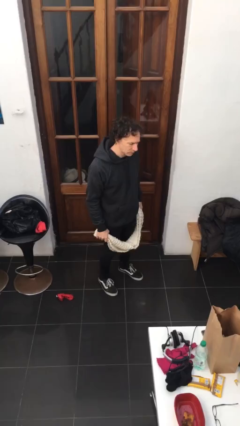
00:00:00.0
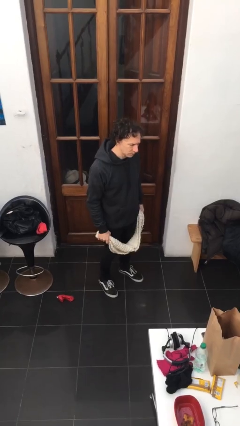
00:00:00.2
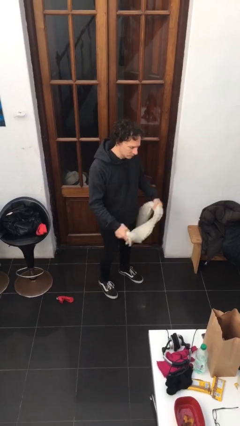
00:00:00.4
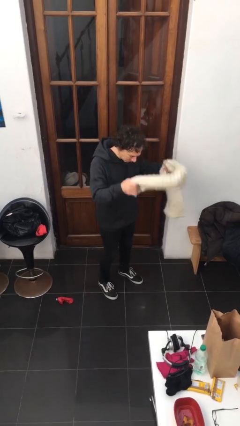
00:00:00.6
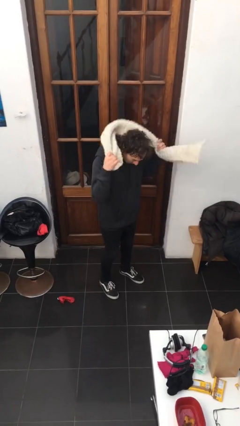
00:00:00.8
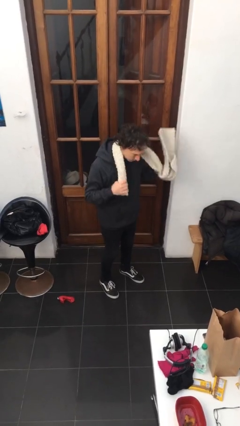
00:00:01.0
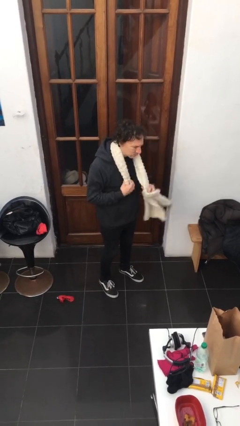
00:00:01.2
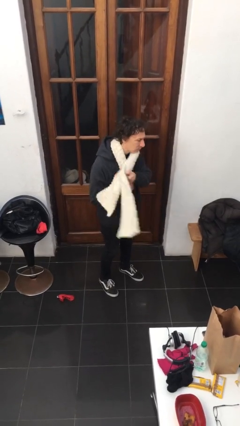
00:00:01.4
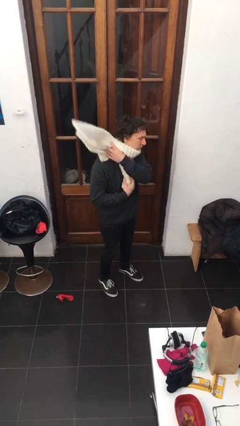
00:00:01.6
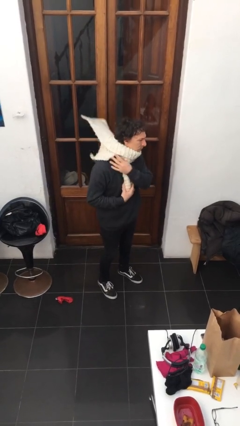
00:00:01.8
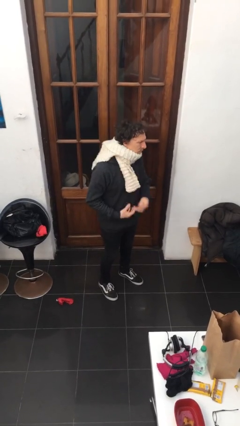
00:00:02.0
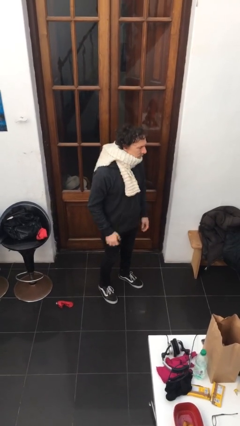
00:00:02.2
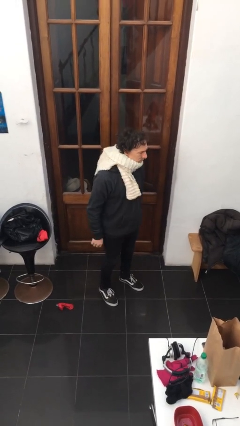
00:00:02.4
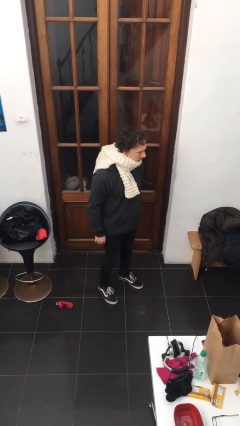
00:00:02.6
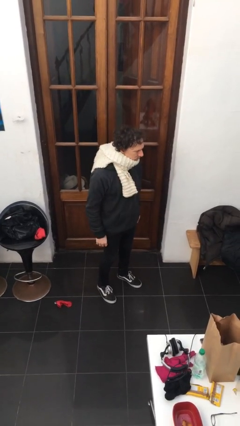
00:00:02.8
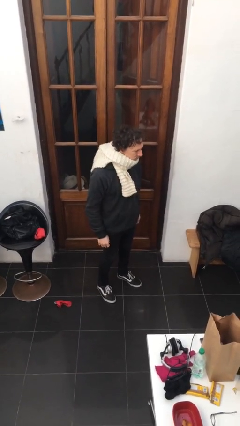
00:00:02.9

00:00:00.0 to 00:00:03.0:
person puts on scarf

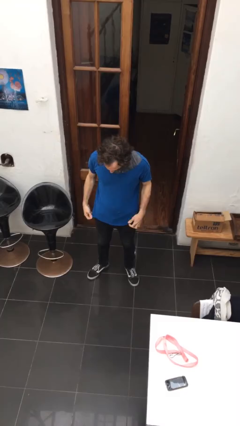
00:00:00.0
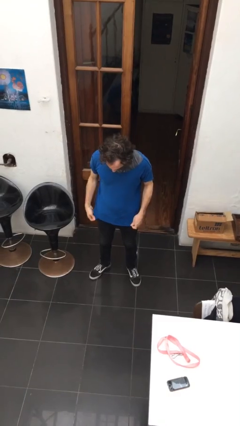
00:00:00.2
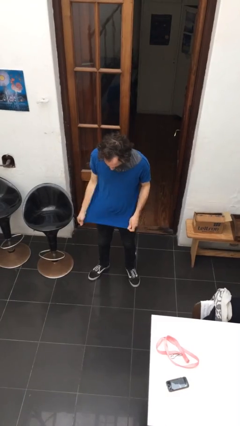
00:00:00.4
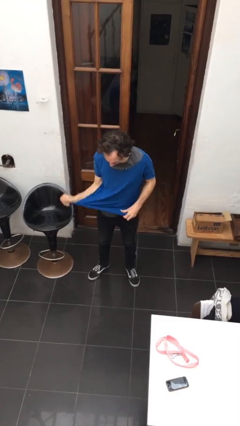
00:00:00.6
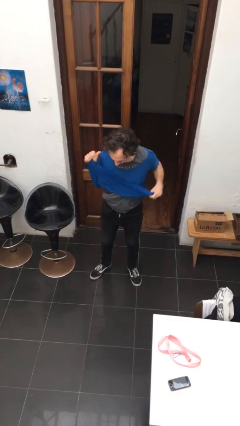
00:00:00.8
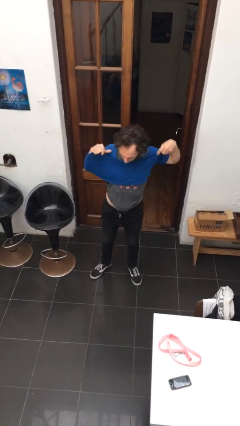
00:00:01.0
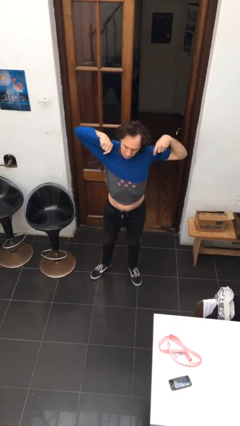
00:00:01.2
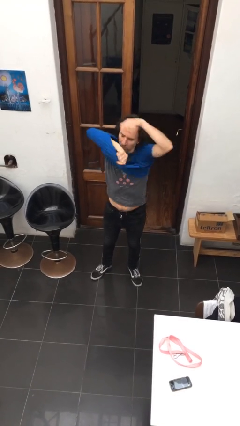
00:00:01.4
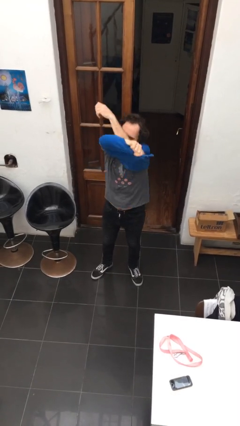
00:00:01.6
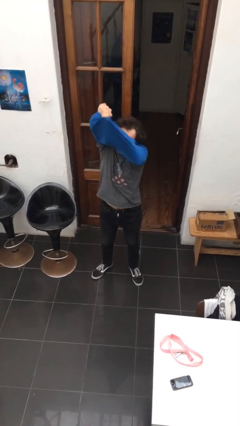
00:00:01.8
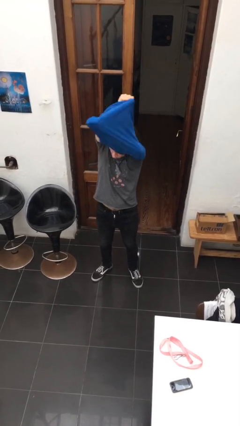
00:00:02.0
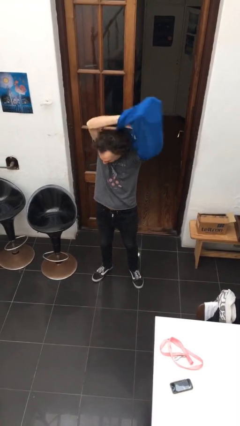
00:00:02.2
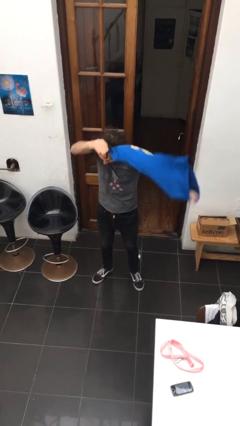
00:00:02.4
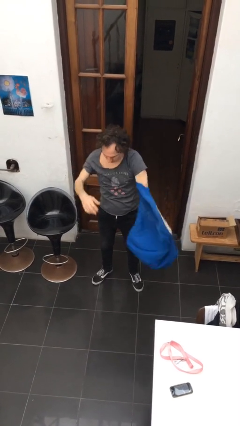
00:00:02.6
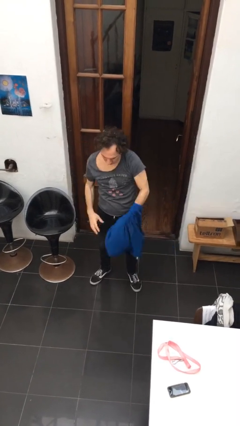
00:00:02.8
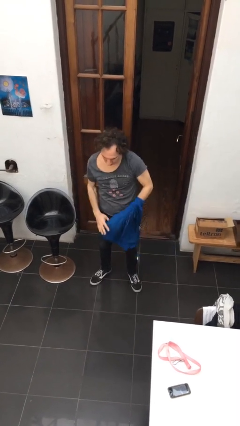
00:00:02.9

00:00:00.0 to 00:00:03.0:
person takes off shirt

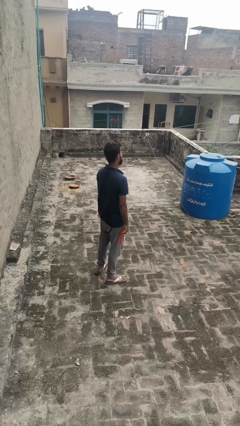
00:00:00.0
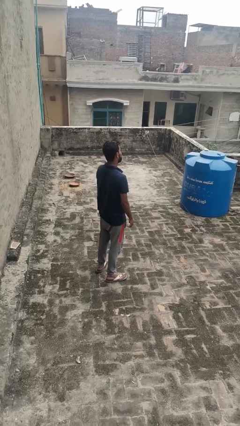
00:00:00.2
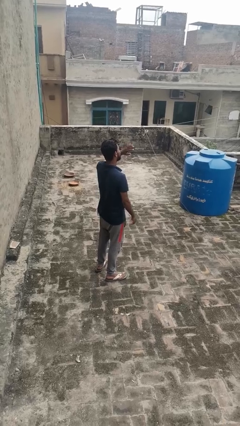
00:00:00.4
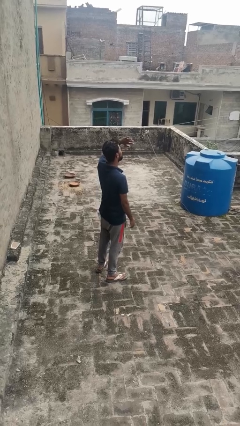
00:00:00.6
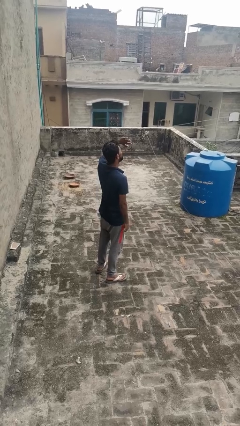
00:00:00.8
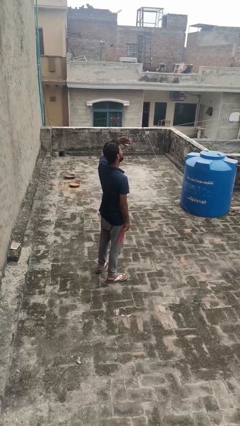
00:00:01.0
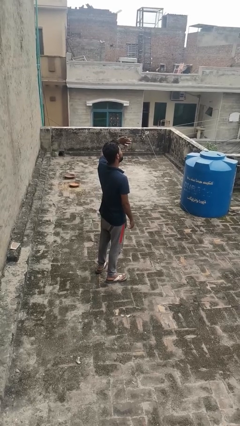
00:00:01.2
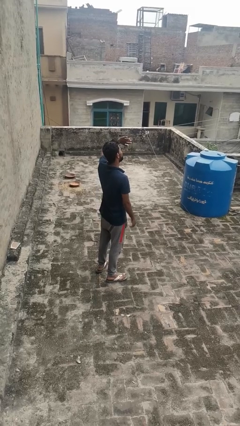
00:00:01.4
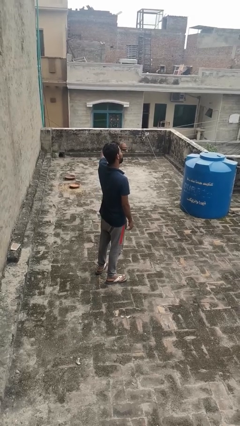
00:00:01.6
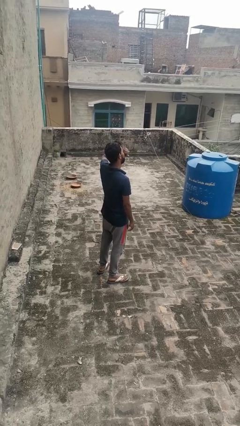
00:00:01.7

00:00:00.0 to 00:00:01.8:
person shades eyes

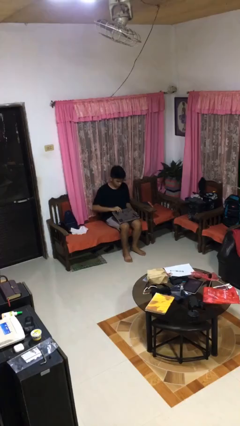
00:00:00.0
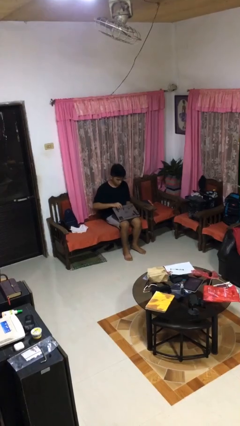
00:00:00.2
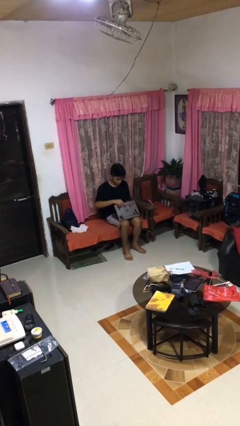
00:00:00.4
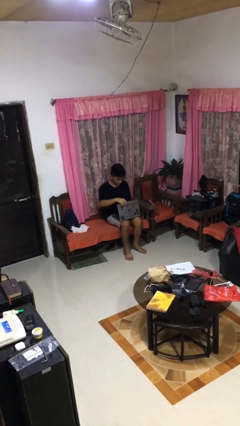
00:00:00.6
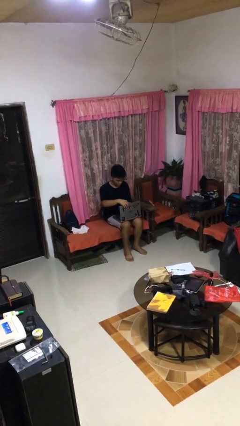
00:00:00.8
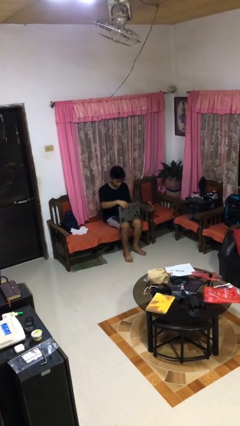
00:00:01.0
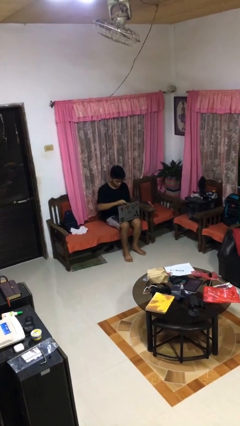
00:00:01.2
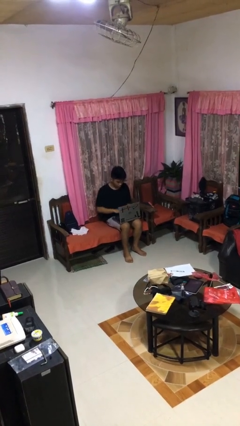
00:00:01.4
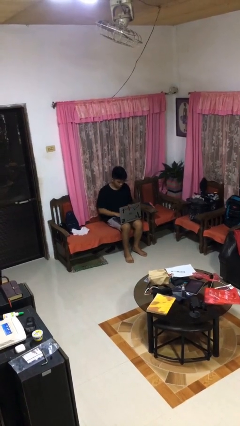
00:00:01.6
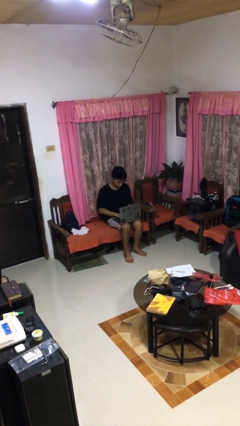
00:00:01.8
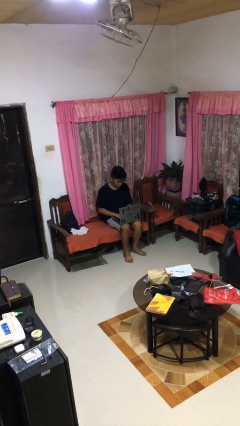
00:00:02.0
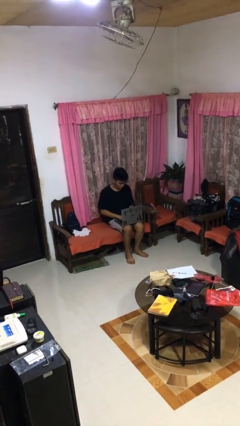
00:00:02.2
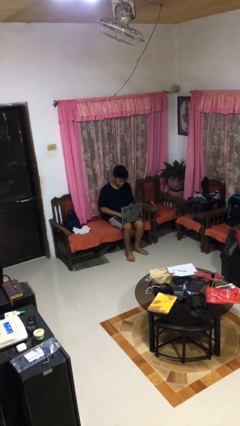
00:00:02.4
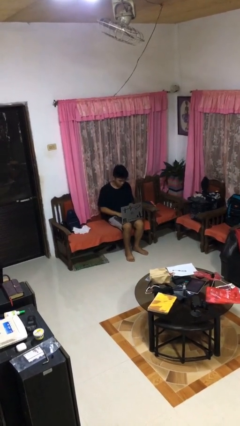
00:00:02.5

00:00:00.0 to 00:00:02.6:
person opens laptop

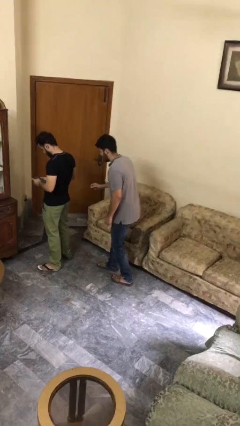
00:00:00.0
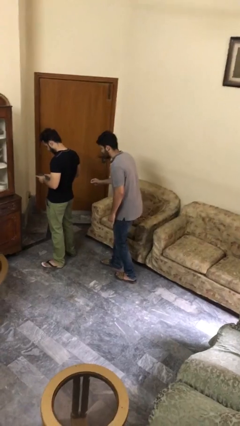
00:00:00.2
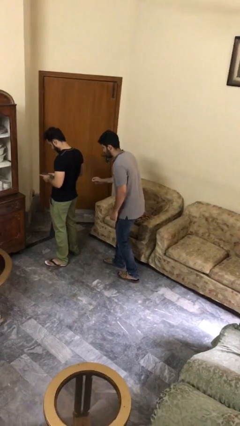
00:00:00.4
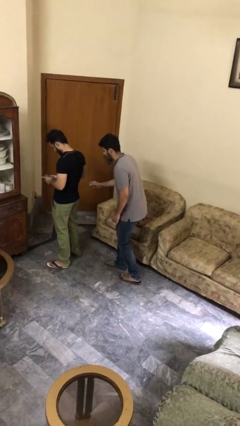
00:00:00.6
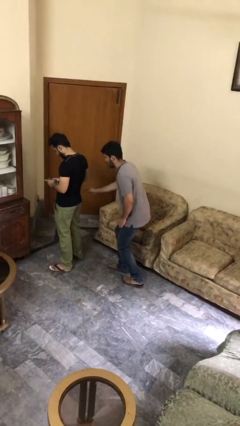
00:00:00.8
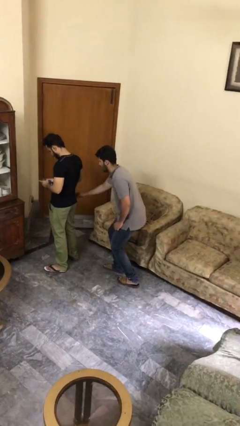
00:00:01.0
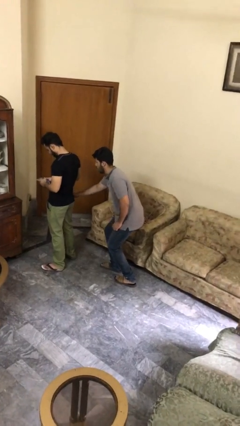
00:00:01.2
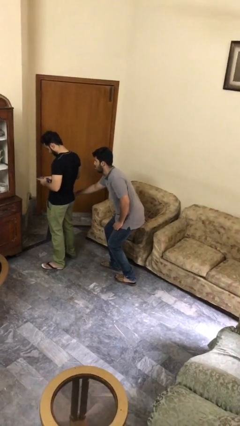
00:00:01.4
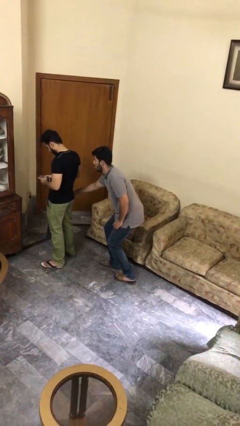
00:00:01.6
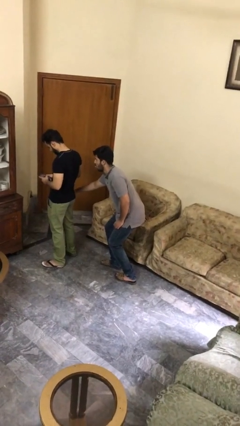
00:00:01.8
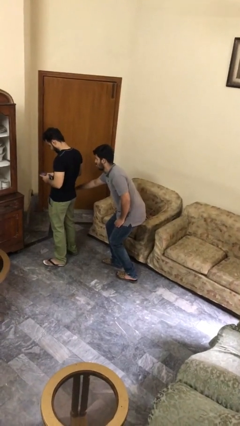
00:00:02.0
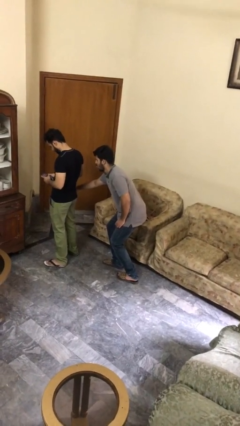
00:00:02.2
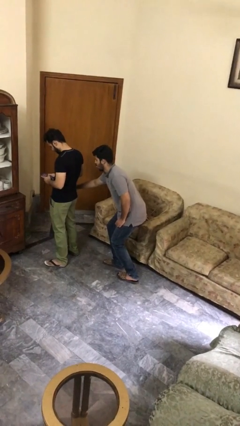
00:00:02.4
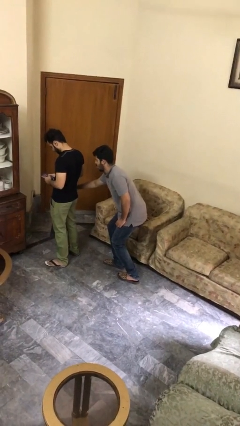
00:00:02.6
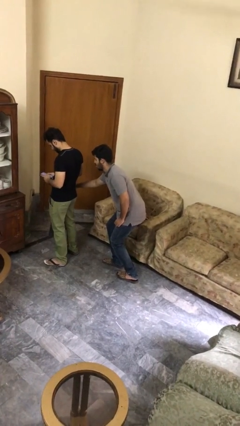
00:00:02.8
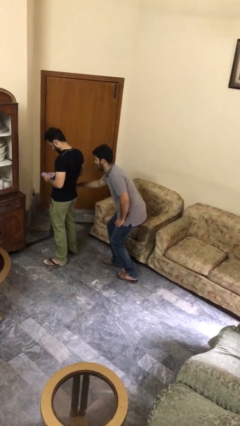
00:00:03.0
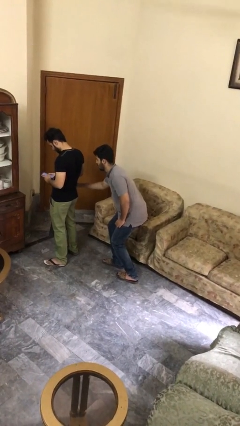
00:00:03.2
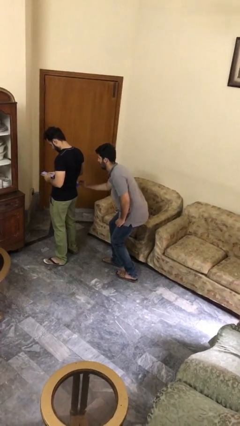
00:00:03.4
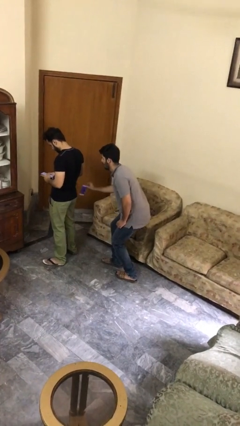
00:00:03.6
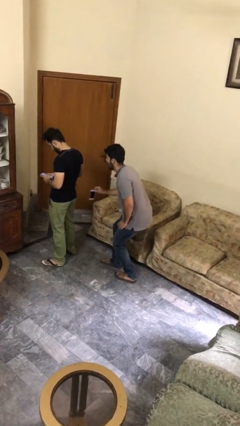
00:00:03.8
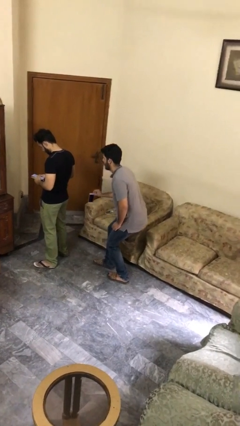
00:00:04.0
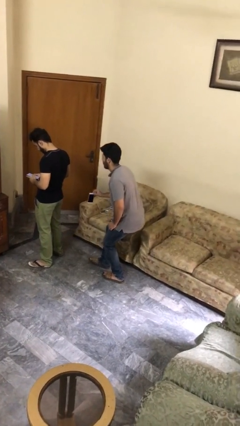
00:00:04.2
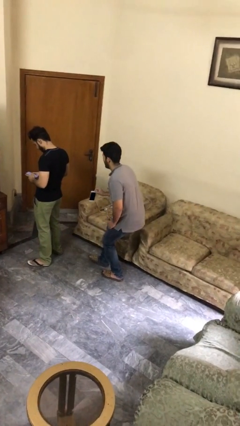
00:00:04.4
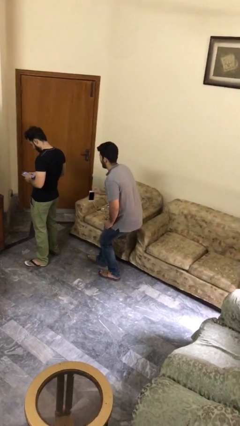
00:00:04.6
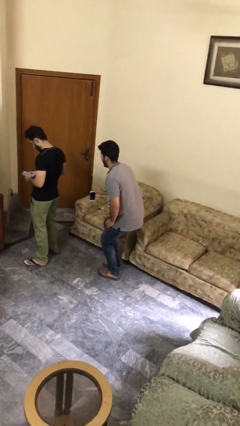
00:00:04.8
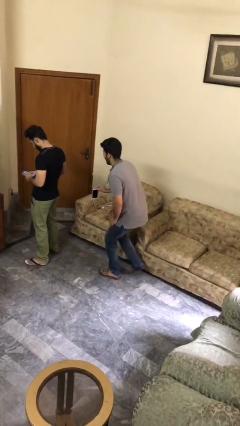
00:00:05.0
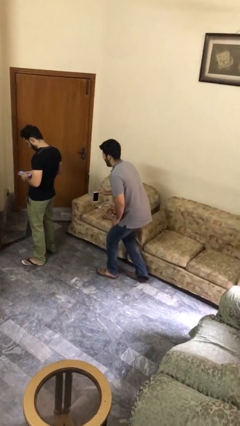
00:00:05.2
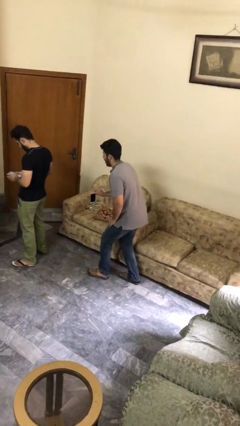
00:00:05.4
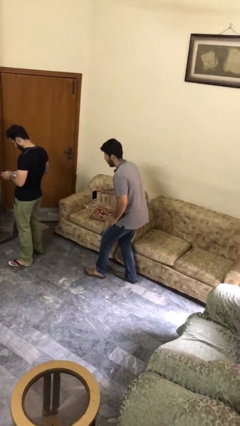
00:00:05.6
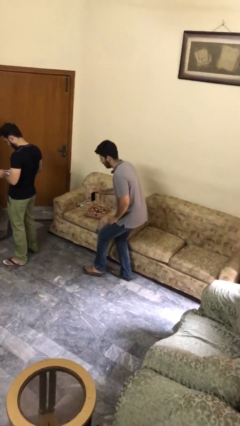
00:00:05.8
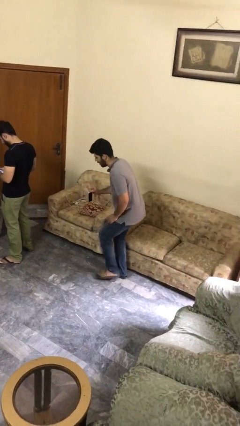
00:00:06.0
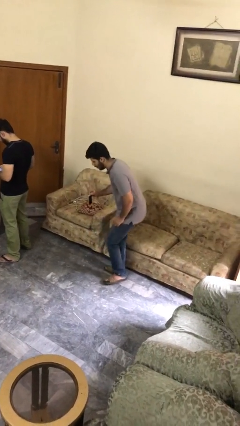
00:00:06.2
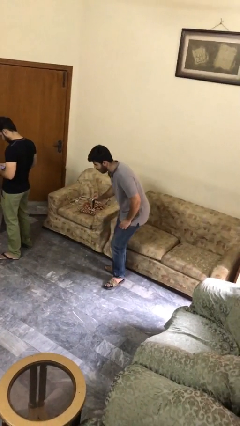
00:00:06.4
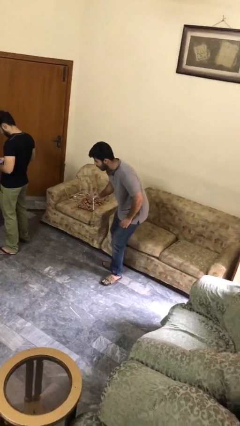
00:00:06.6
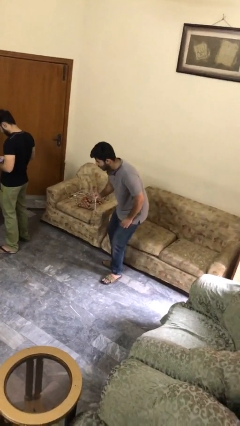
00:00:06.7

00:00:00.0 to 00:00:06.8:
person steals object from person
